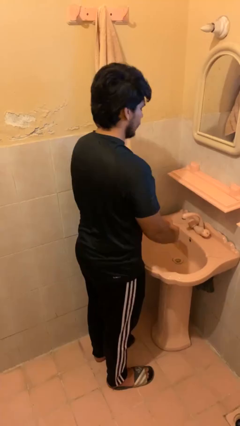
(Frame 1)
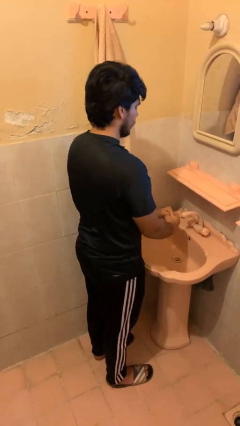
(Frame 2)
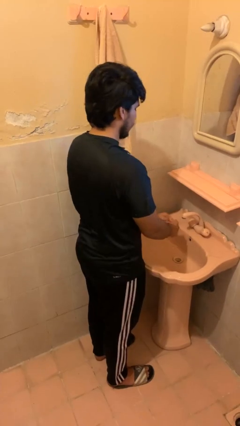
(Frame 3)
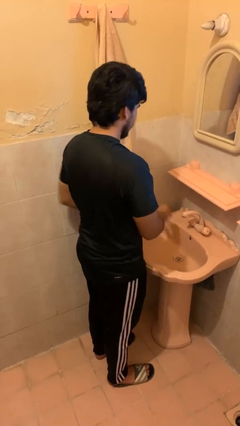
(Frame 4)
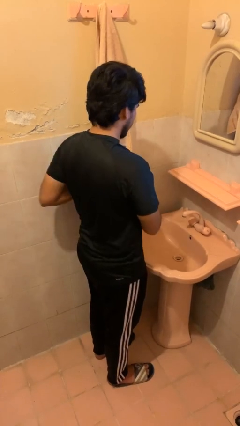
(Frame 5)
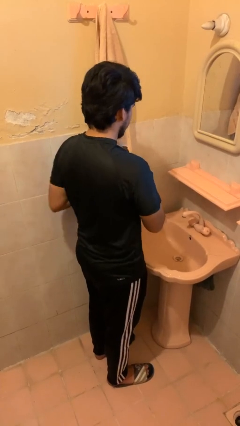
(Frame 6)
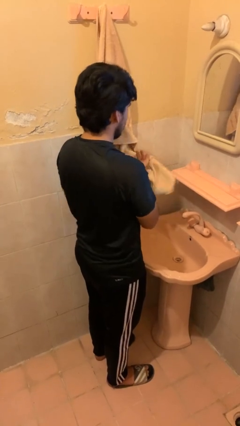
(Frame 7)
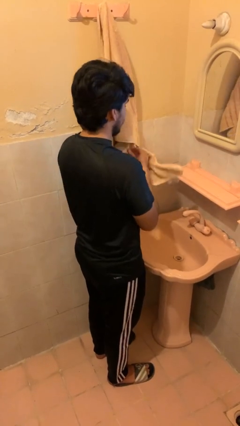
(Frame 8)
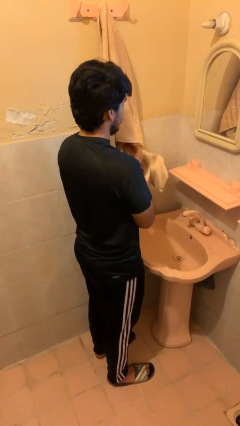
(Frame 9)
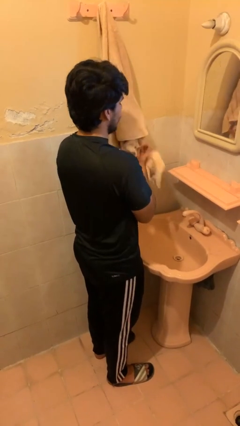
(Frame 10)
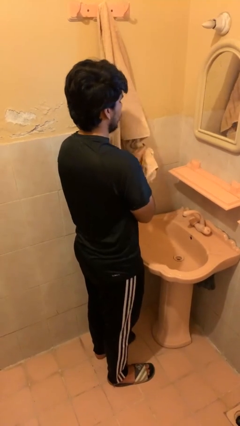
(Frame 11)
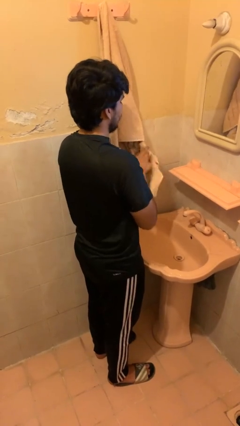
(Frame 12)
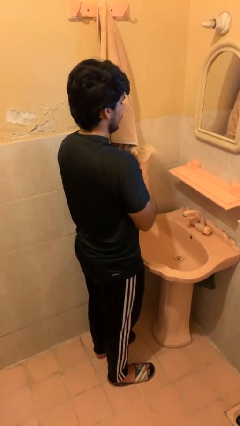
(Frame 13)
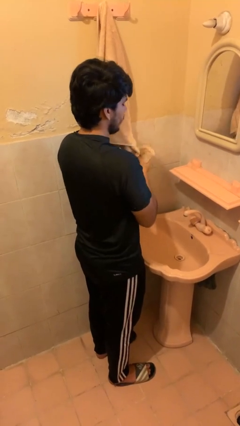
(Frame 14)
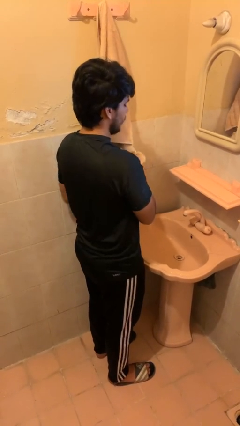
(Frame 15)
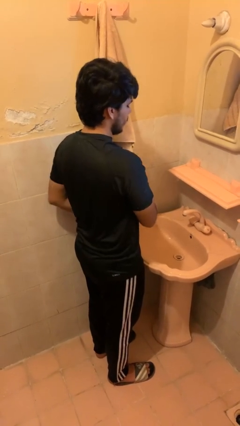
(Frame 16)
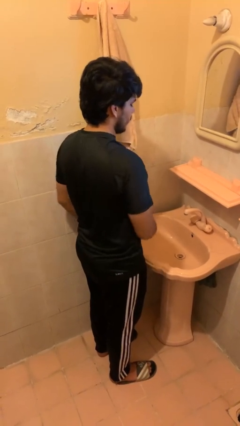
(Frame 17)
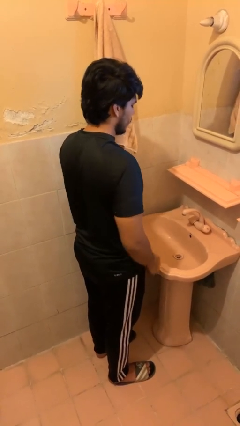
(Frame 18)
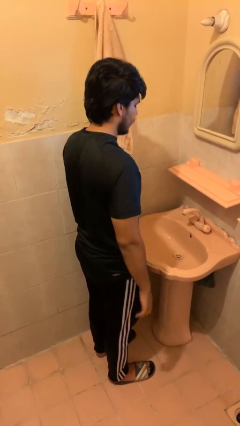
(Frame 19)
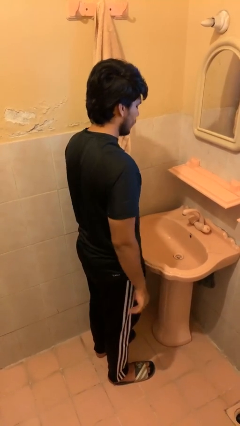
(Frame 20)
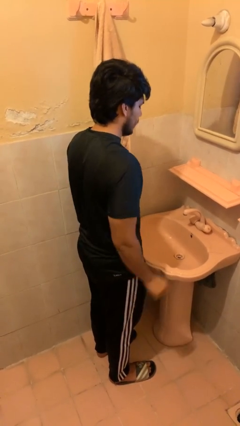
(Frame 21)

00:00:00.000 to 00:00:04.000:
person dries hands with towel

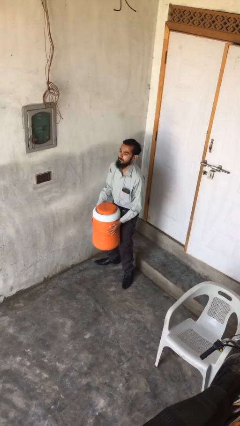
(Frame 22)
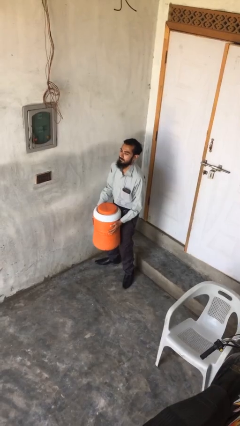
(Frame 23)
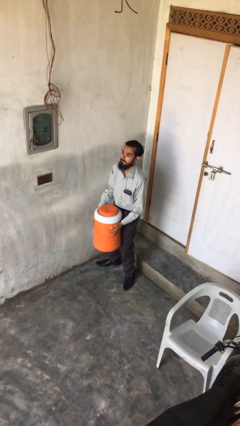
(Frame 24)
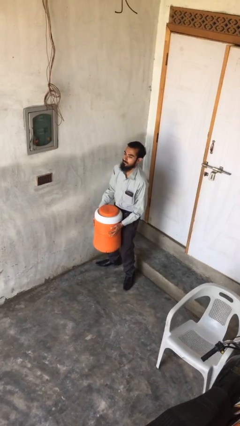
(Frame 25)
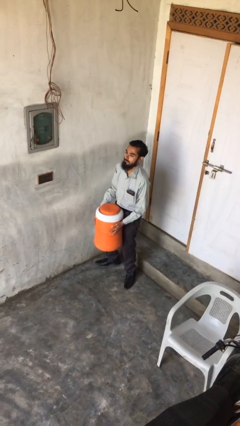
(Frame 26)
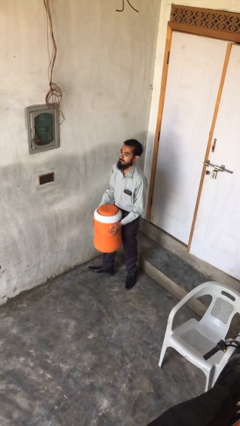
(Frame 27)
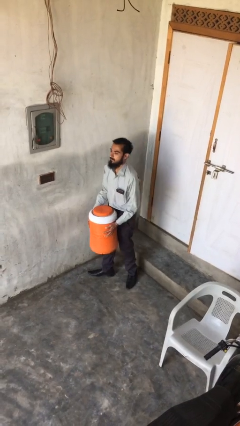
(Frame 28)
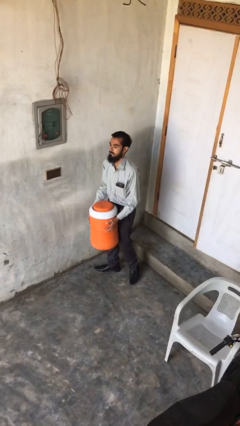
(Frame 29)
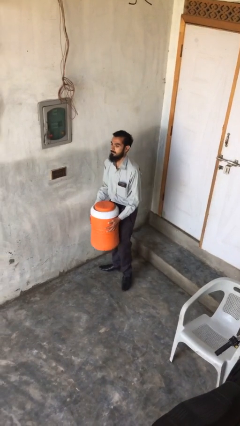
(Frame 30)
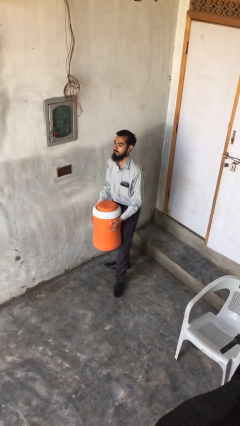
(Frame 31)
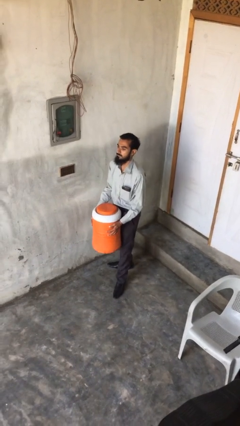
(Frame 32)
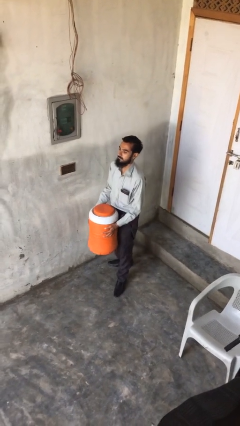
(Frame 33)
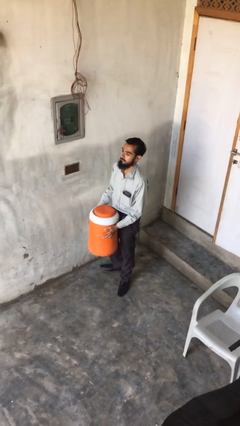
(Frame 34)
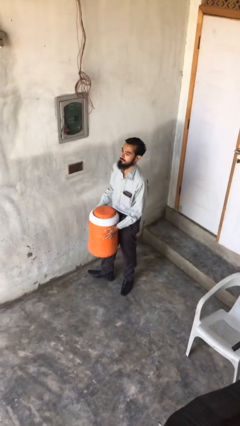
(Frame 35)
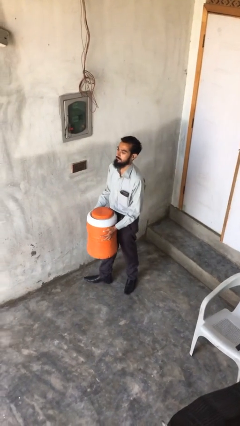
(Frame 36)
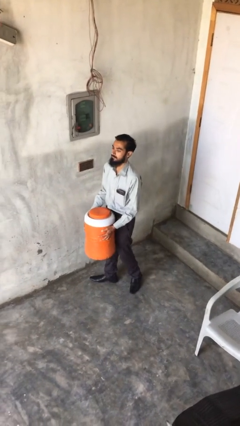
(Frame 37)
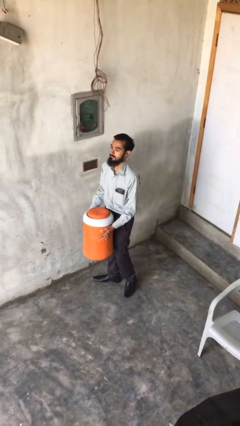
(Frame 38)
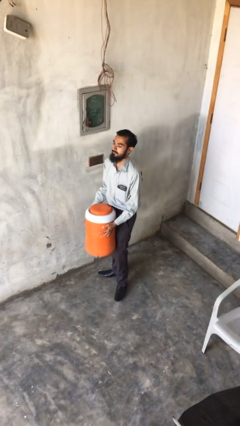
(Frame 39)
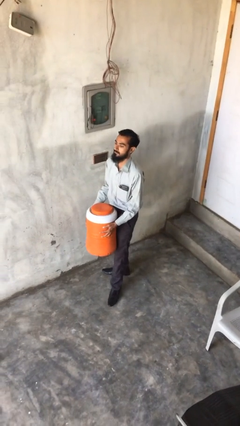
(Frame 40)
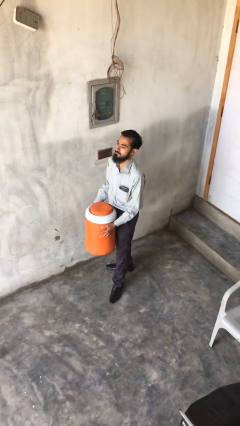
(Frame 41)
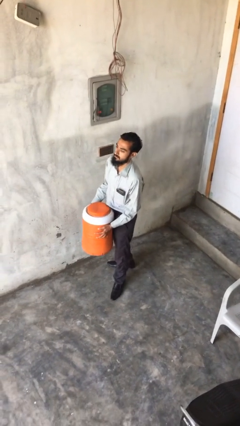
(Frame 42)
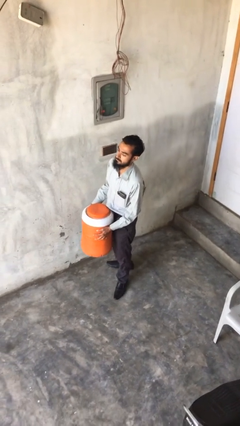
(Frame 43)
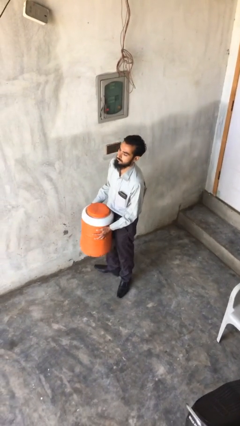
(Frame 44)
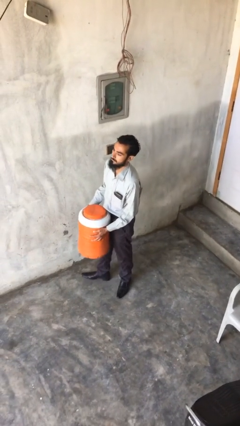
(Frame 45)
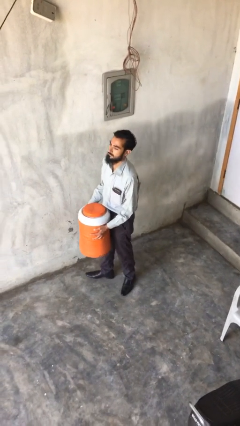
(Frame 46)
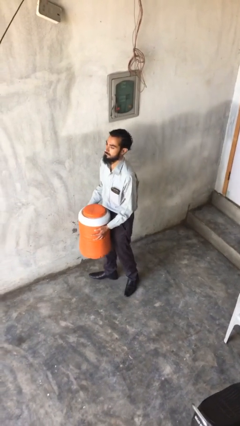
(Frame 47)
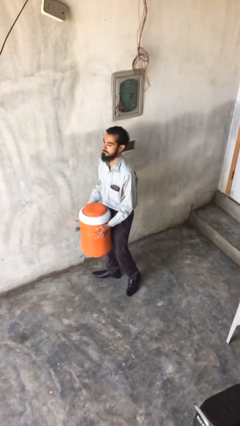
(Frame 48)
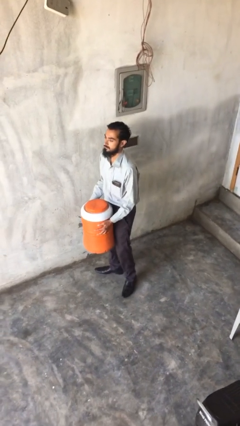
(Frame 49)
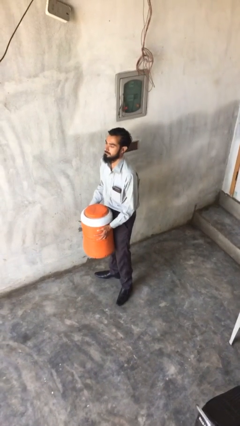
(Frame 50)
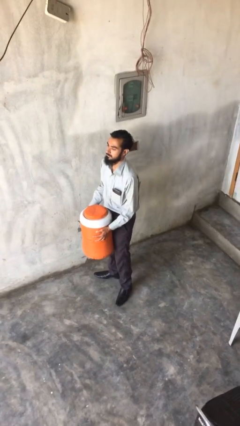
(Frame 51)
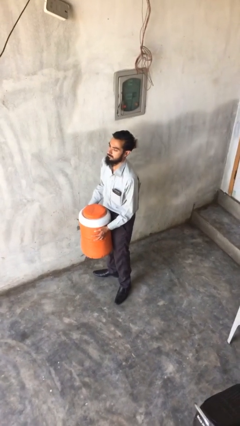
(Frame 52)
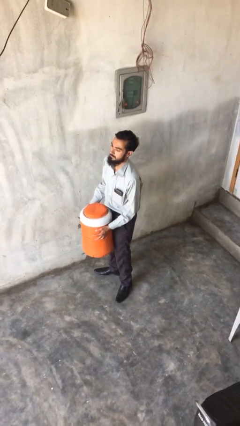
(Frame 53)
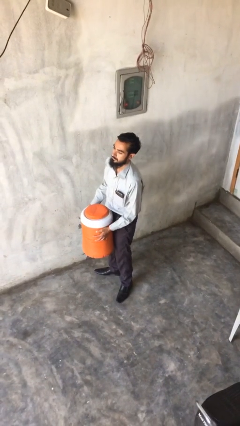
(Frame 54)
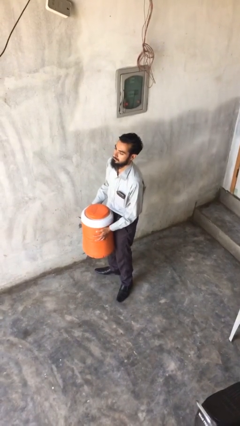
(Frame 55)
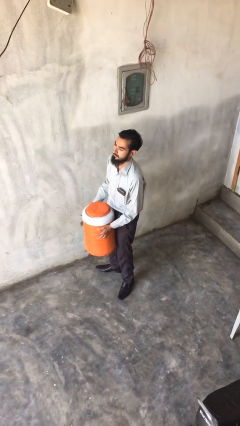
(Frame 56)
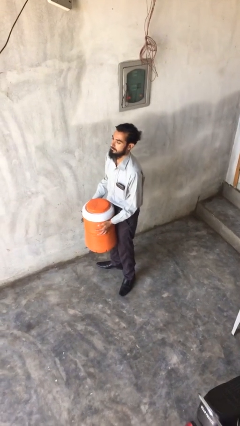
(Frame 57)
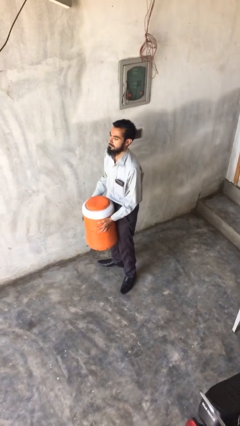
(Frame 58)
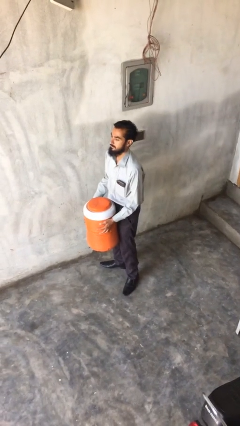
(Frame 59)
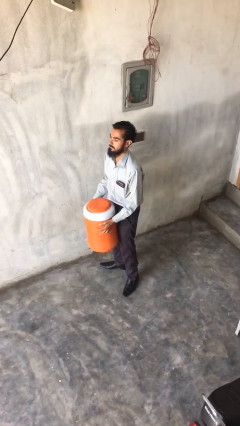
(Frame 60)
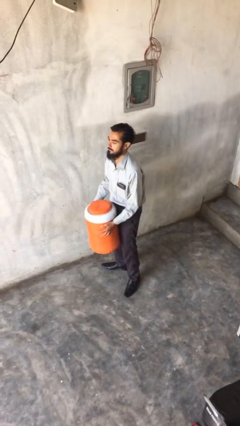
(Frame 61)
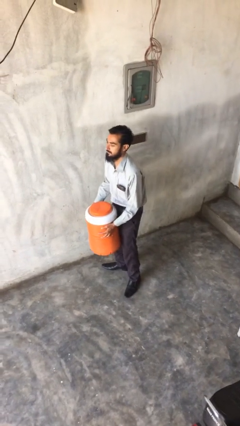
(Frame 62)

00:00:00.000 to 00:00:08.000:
person carries heavy object

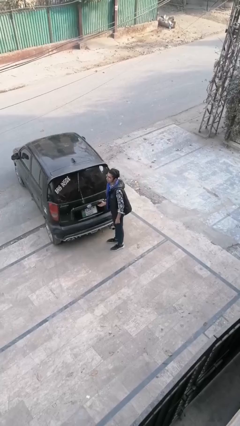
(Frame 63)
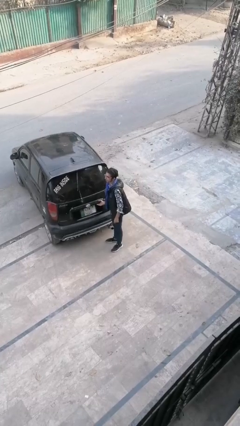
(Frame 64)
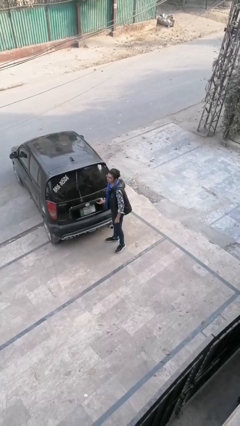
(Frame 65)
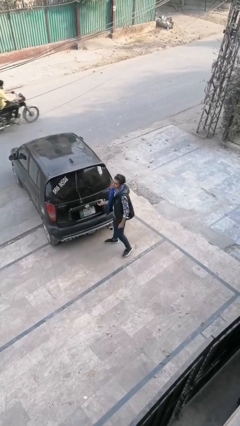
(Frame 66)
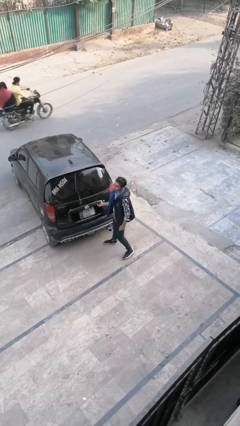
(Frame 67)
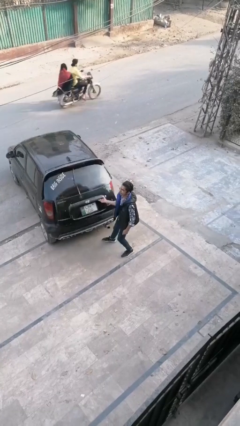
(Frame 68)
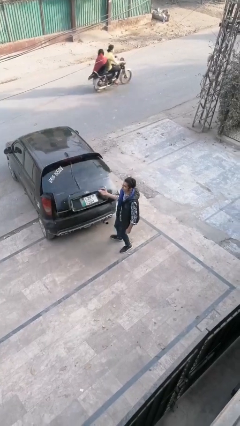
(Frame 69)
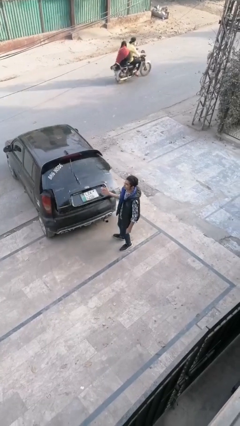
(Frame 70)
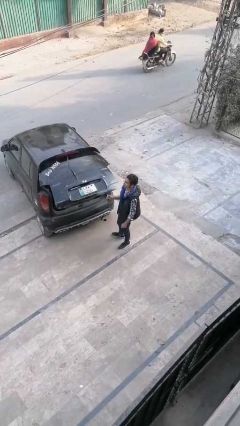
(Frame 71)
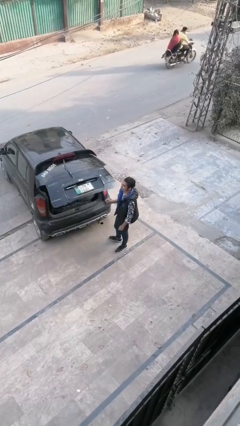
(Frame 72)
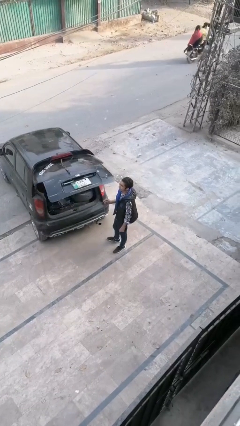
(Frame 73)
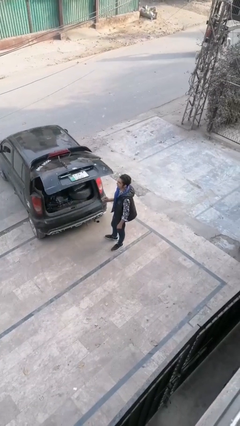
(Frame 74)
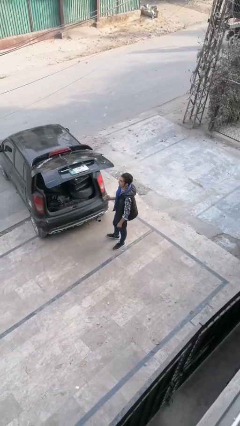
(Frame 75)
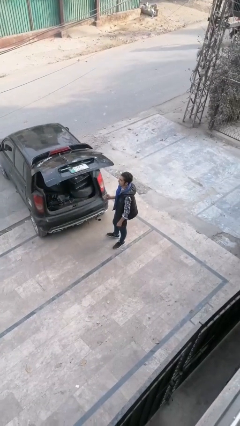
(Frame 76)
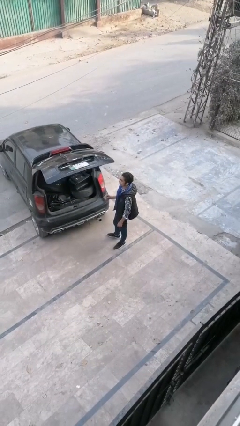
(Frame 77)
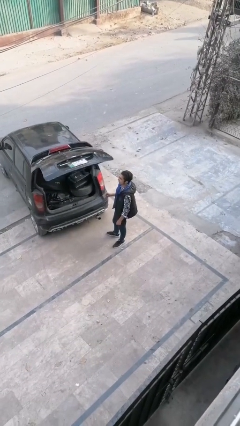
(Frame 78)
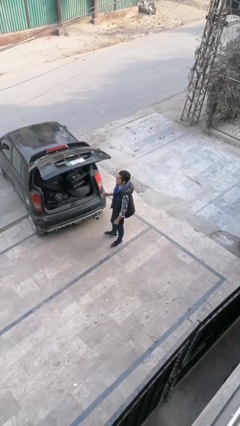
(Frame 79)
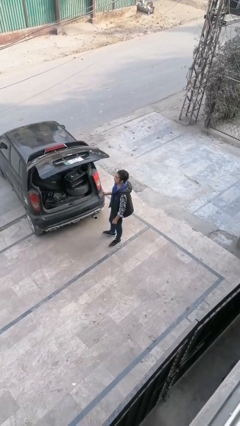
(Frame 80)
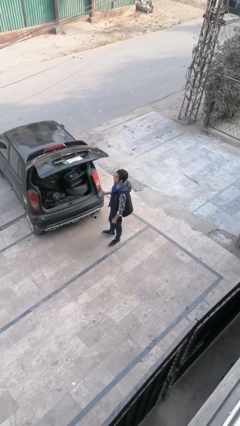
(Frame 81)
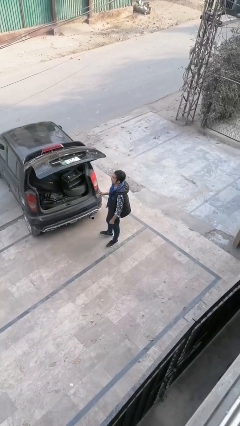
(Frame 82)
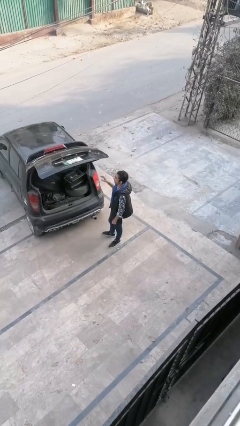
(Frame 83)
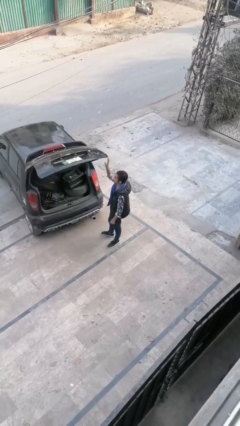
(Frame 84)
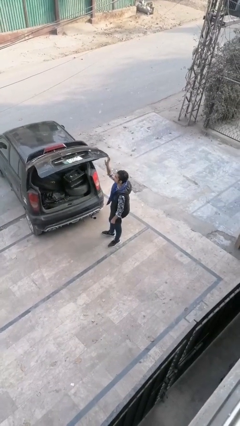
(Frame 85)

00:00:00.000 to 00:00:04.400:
person opens car trunk

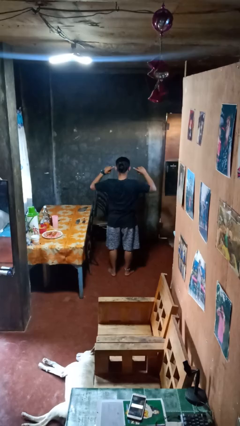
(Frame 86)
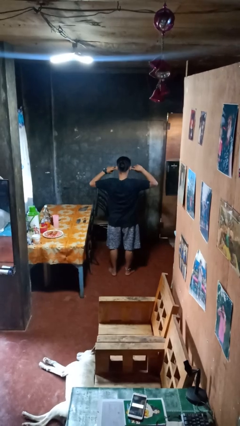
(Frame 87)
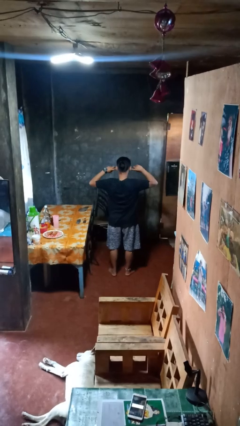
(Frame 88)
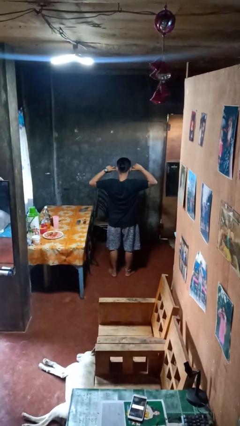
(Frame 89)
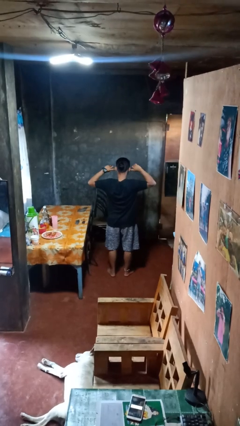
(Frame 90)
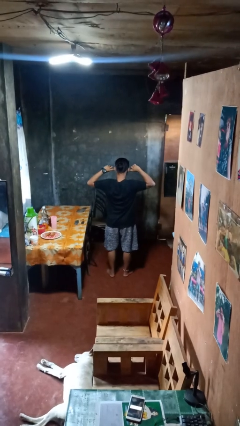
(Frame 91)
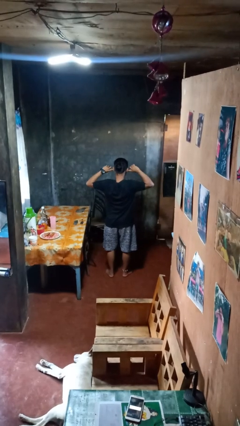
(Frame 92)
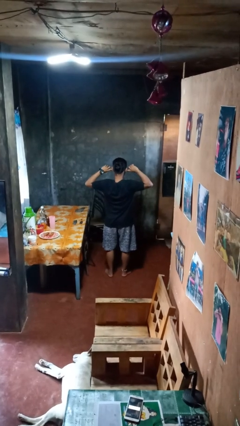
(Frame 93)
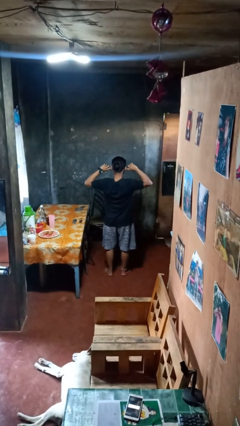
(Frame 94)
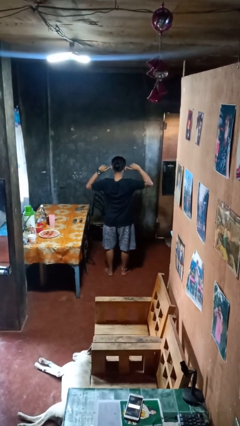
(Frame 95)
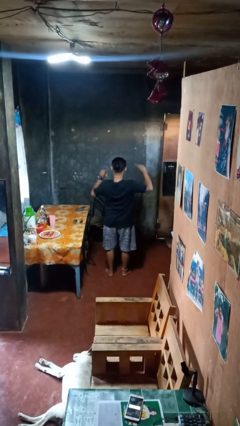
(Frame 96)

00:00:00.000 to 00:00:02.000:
person puts fingers in ear
